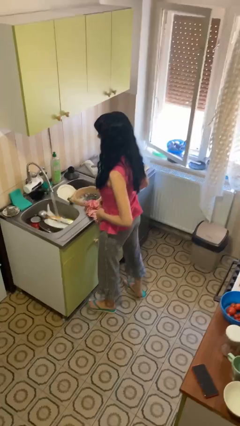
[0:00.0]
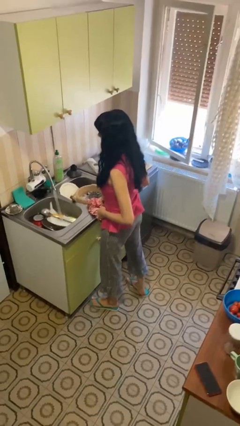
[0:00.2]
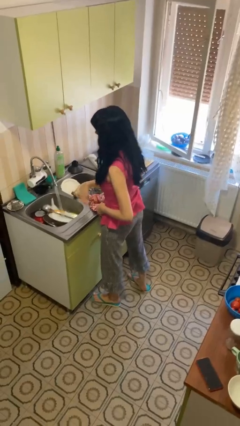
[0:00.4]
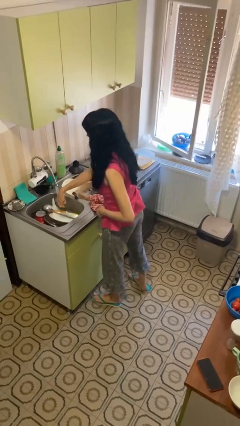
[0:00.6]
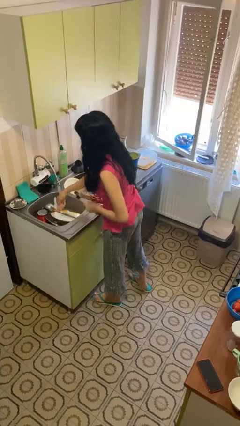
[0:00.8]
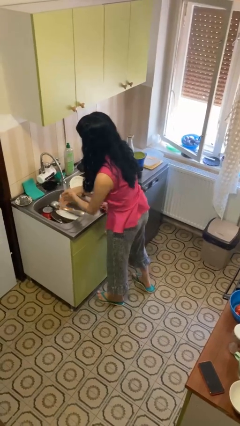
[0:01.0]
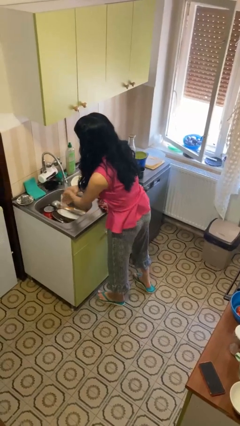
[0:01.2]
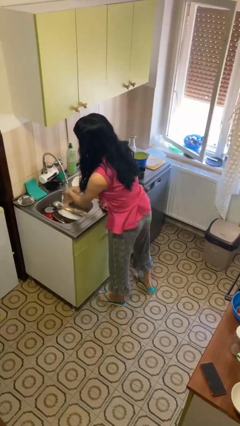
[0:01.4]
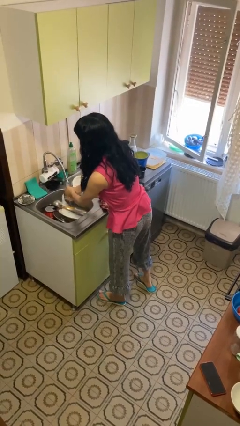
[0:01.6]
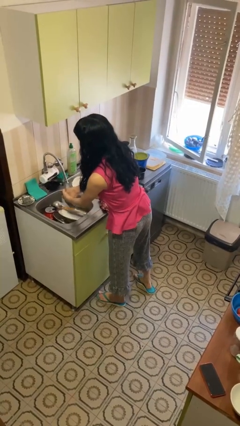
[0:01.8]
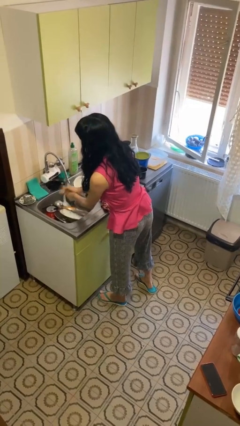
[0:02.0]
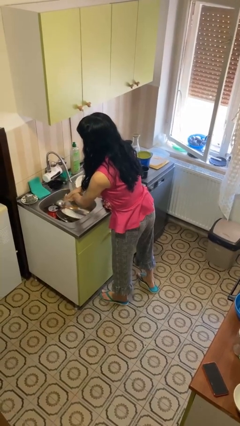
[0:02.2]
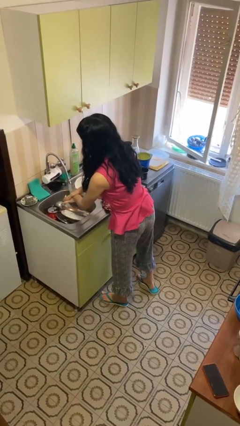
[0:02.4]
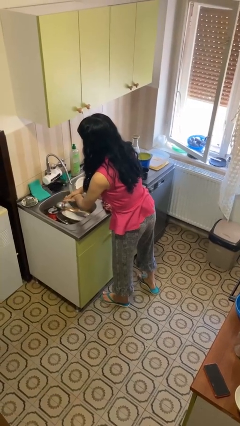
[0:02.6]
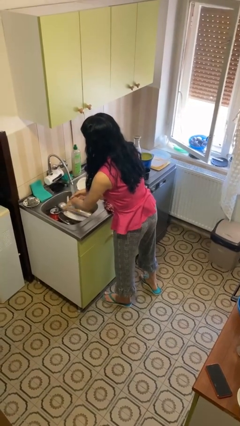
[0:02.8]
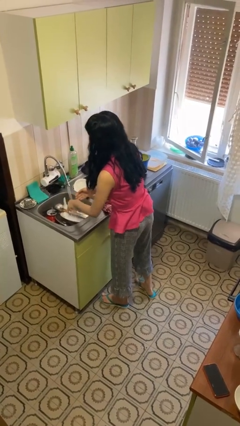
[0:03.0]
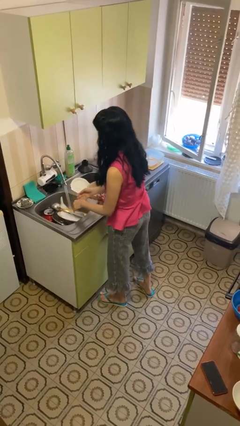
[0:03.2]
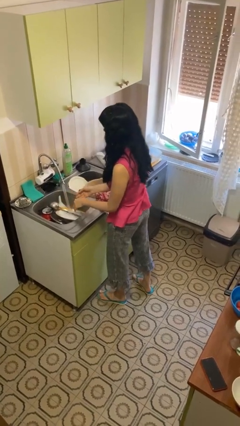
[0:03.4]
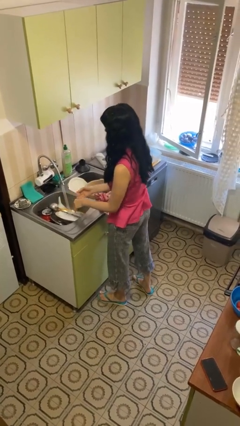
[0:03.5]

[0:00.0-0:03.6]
person washes hands

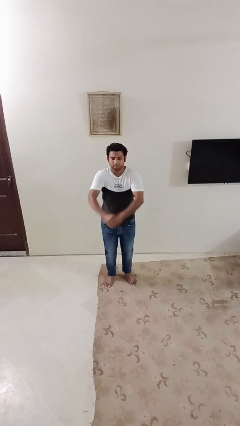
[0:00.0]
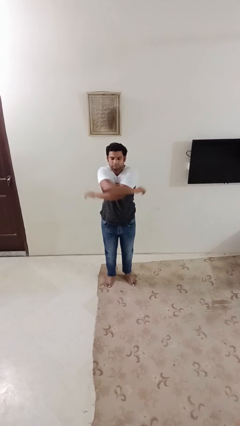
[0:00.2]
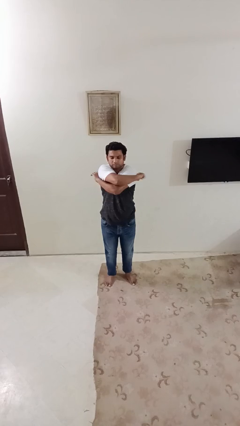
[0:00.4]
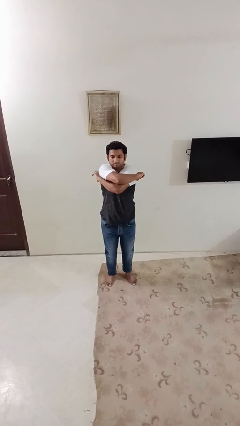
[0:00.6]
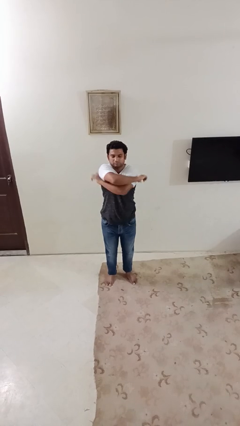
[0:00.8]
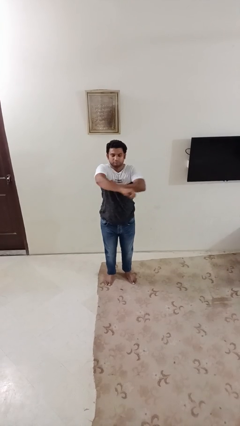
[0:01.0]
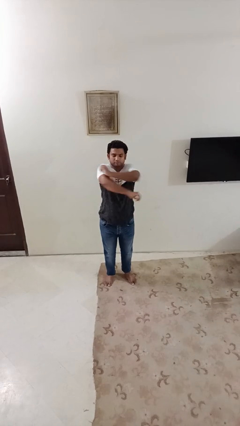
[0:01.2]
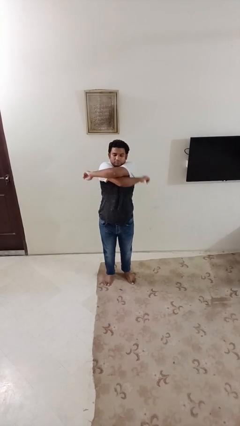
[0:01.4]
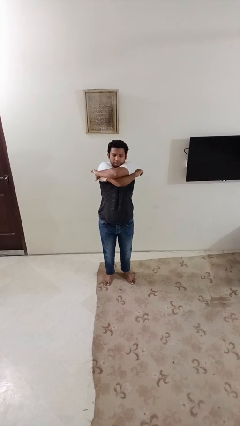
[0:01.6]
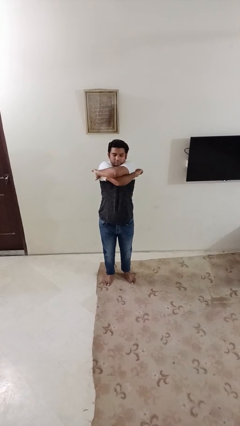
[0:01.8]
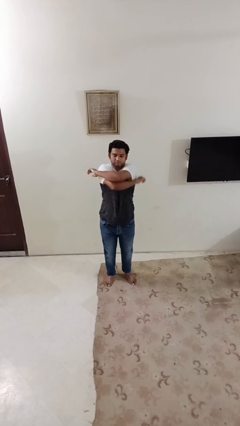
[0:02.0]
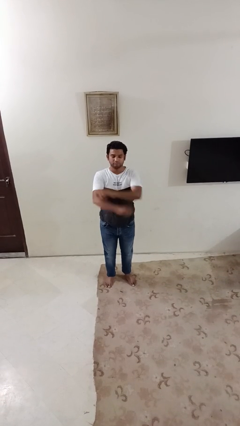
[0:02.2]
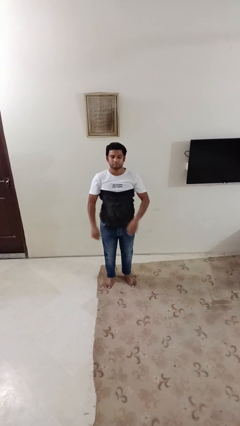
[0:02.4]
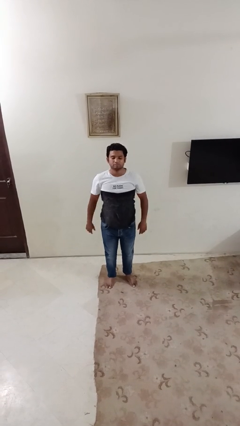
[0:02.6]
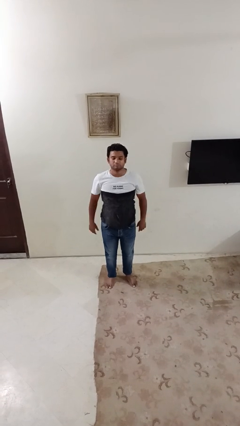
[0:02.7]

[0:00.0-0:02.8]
person stretches arms to side

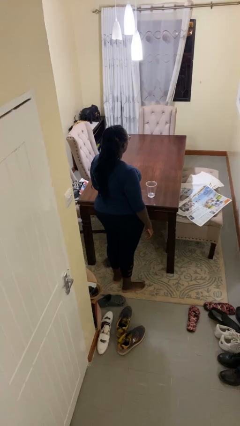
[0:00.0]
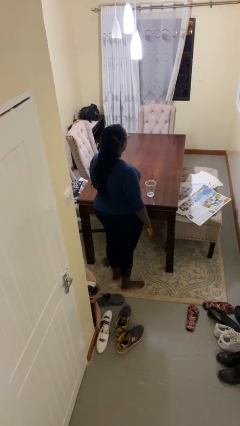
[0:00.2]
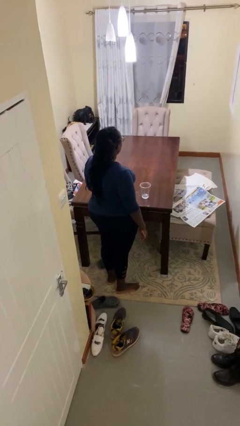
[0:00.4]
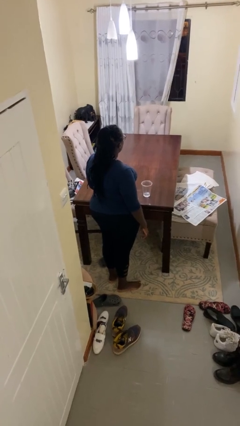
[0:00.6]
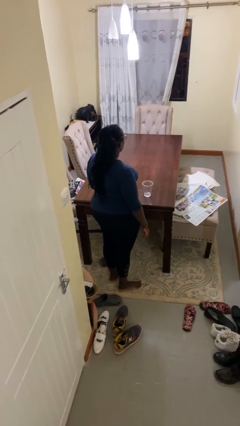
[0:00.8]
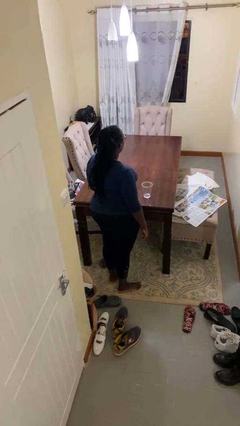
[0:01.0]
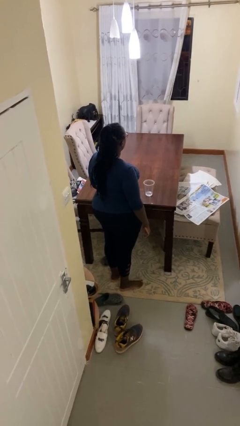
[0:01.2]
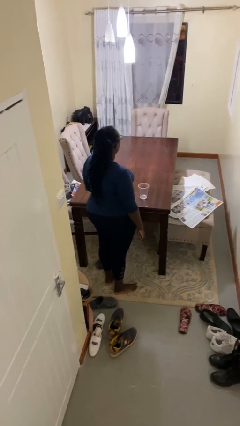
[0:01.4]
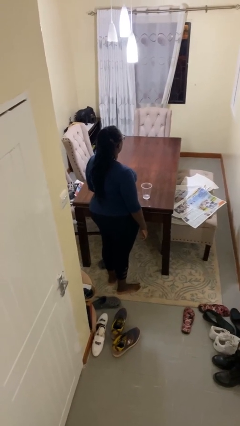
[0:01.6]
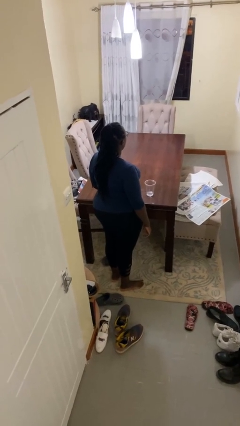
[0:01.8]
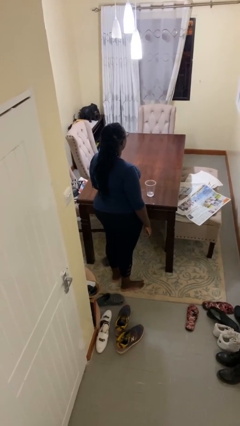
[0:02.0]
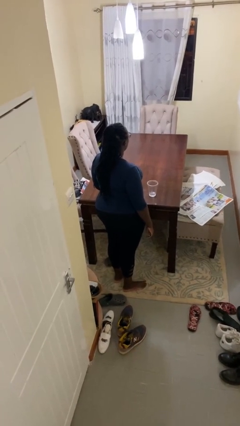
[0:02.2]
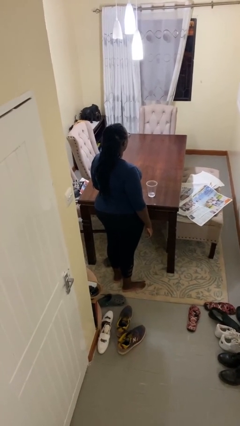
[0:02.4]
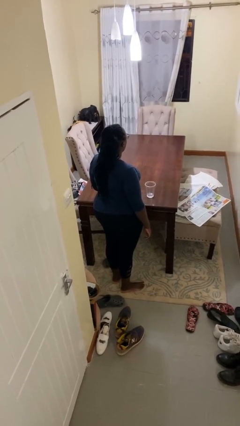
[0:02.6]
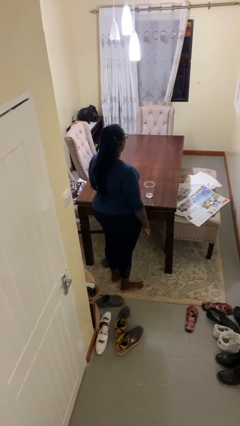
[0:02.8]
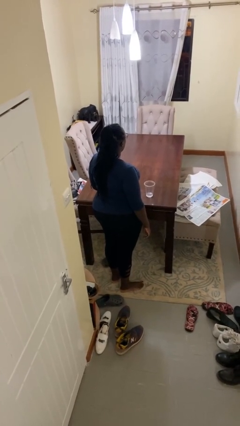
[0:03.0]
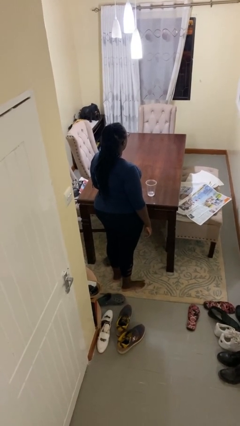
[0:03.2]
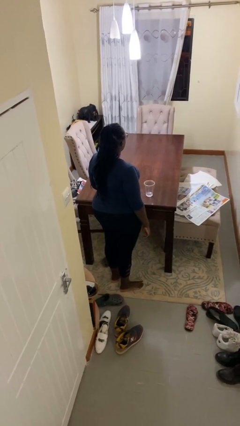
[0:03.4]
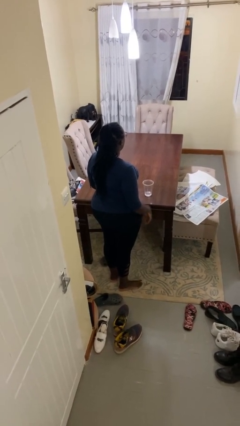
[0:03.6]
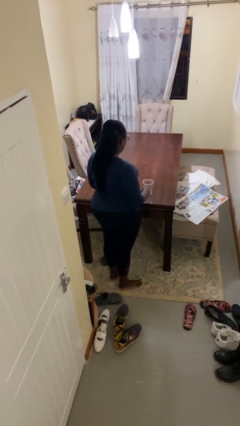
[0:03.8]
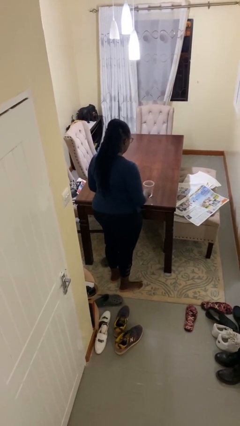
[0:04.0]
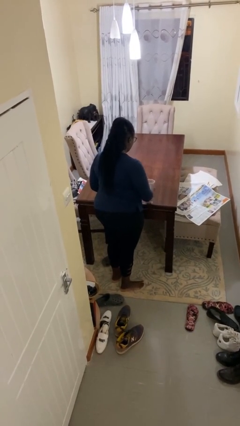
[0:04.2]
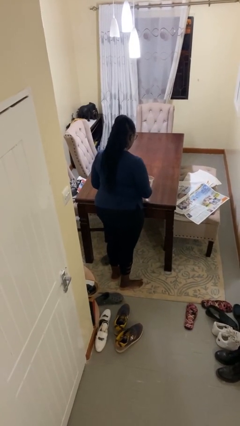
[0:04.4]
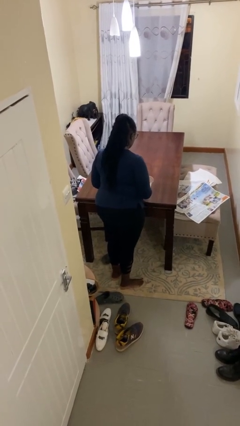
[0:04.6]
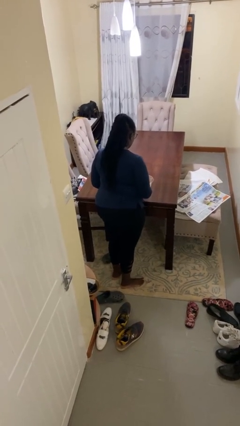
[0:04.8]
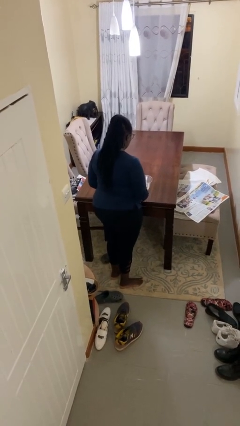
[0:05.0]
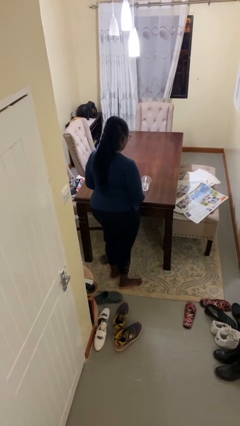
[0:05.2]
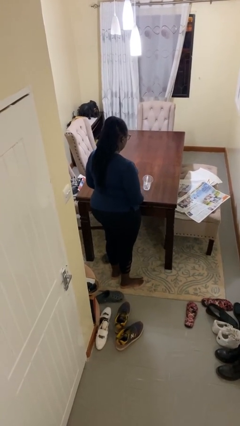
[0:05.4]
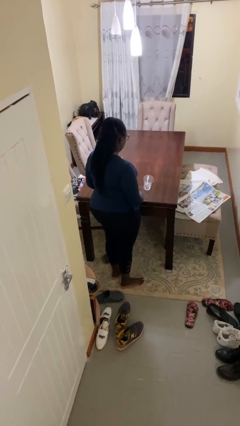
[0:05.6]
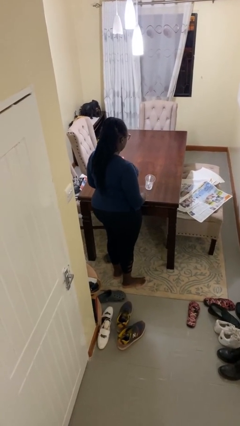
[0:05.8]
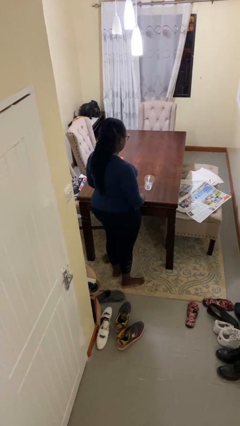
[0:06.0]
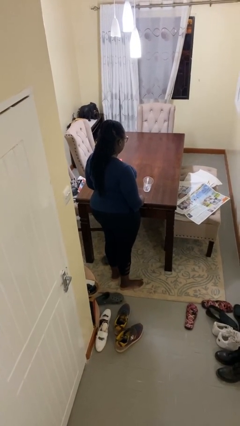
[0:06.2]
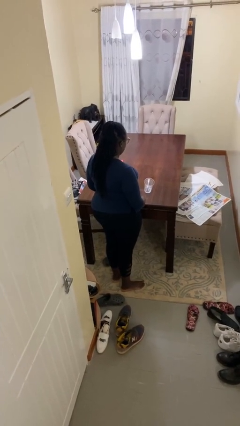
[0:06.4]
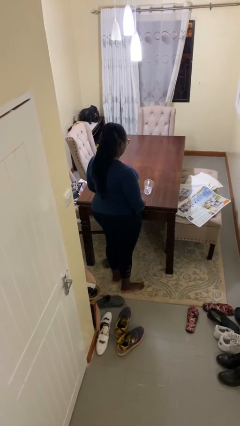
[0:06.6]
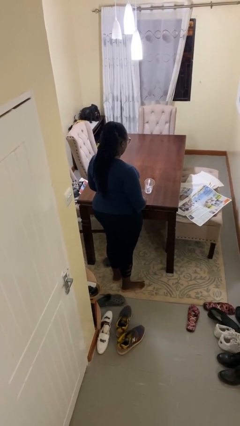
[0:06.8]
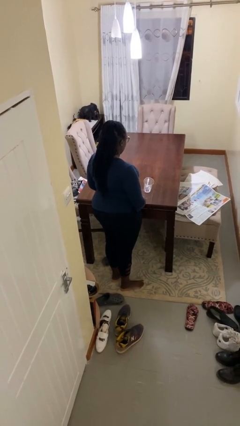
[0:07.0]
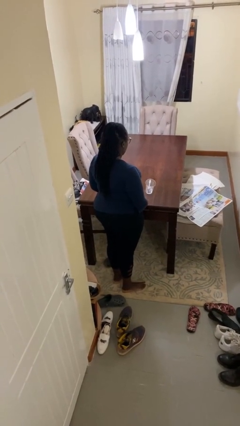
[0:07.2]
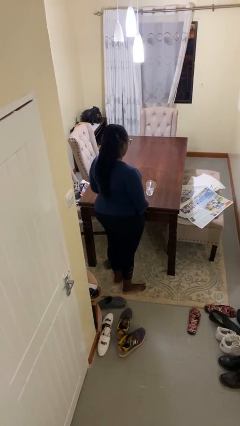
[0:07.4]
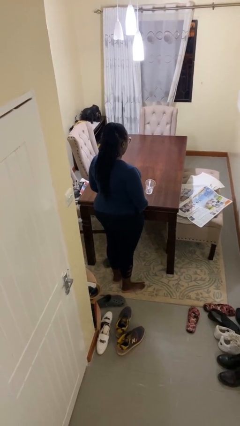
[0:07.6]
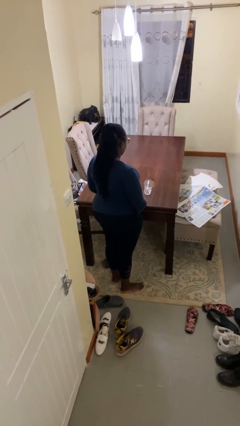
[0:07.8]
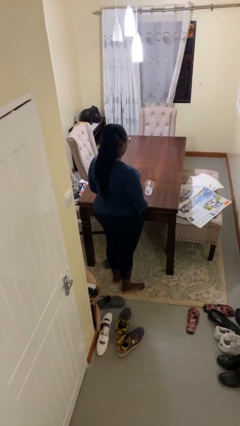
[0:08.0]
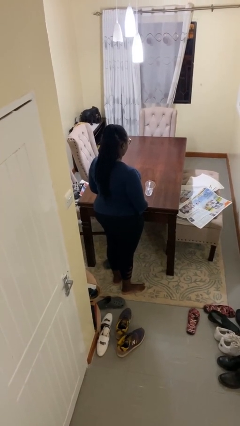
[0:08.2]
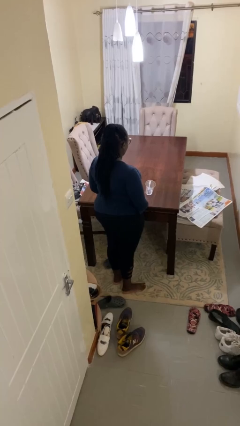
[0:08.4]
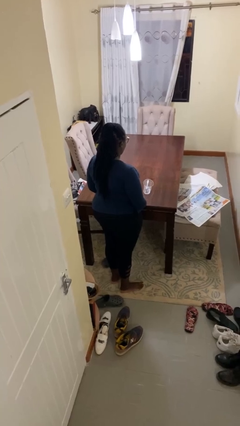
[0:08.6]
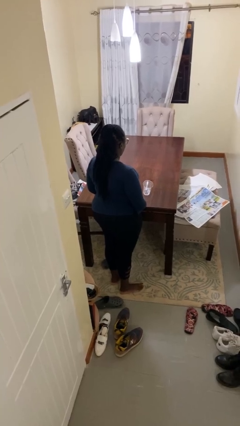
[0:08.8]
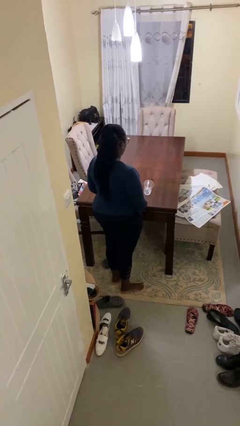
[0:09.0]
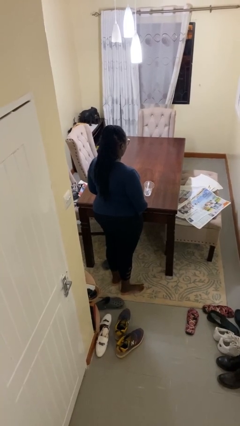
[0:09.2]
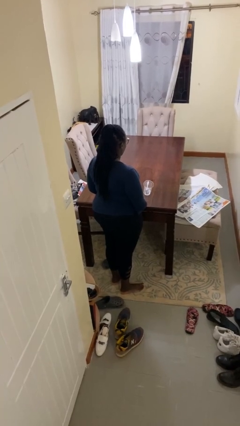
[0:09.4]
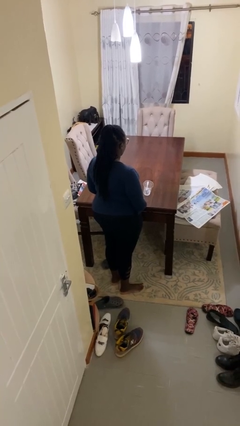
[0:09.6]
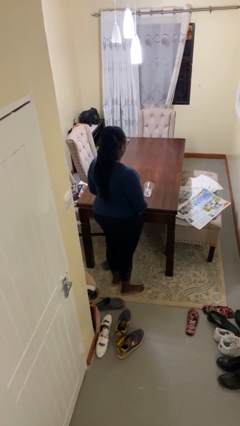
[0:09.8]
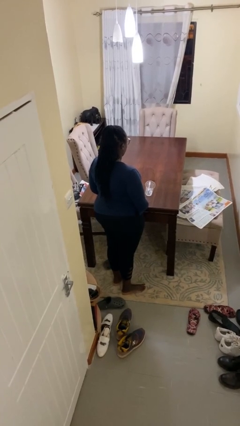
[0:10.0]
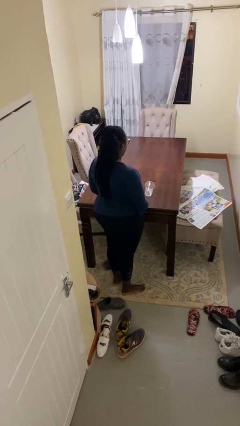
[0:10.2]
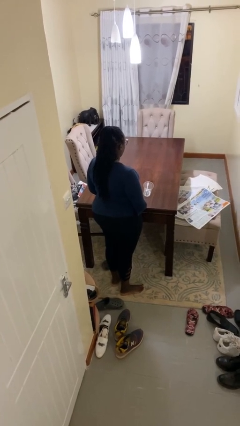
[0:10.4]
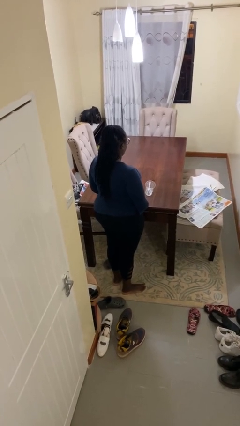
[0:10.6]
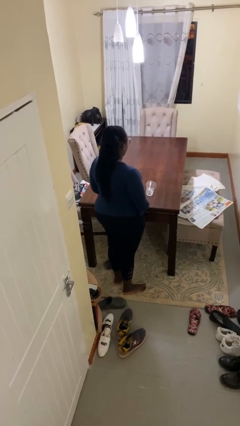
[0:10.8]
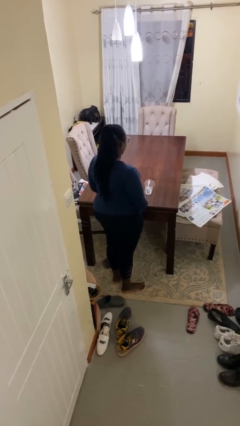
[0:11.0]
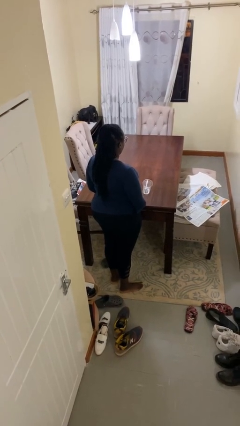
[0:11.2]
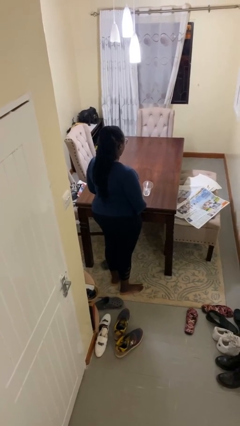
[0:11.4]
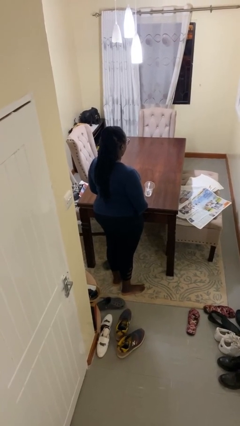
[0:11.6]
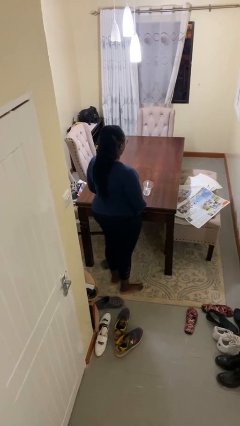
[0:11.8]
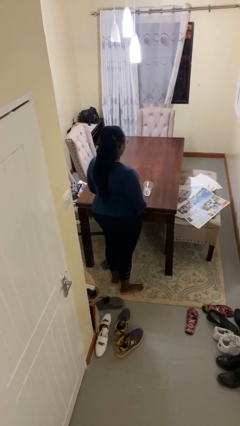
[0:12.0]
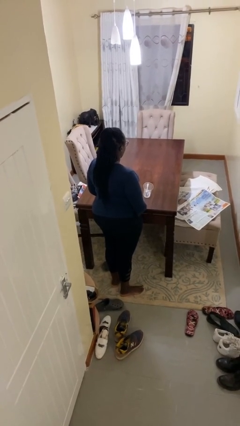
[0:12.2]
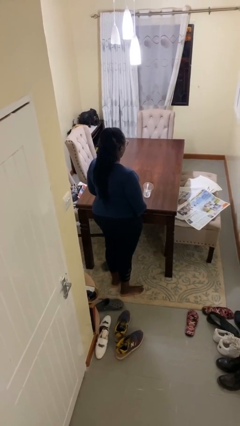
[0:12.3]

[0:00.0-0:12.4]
person spills on table
